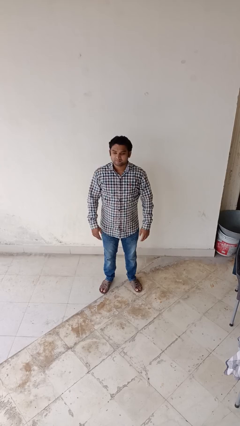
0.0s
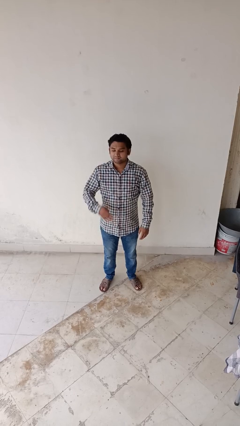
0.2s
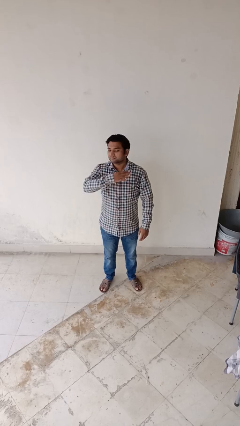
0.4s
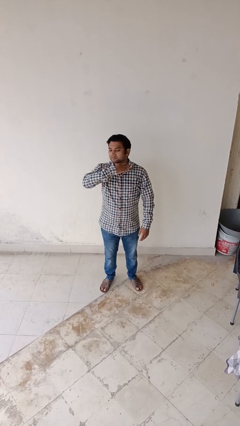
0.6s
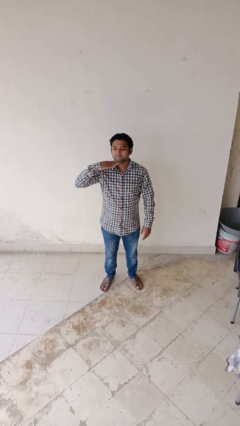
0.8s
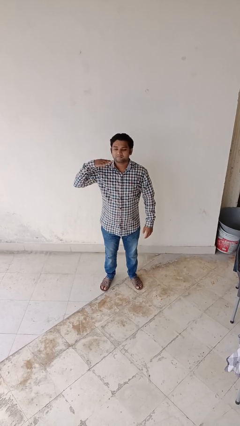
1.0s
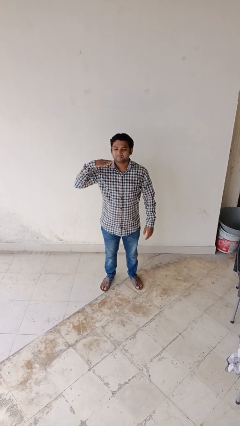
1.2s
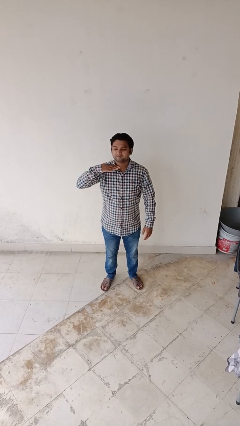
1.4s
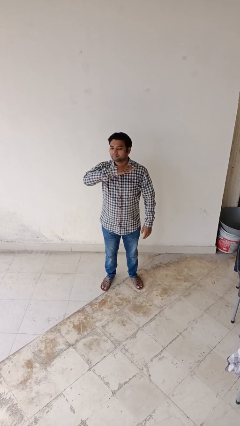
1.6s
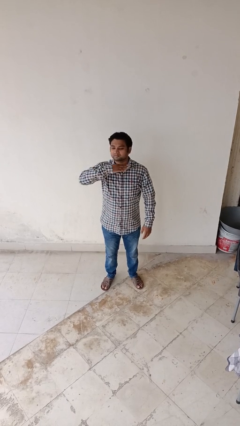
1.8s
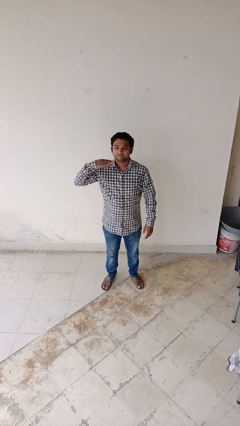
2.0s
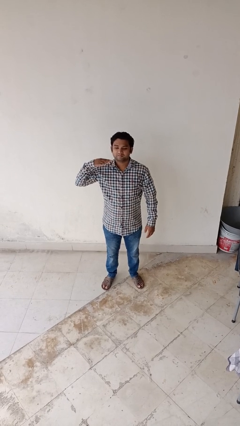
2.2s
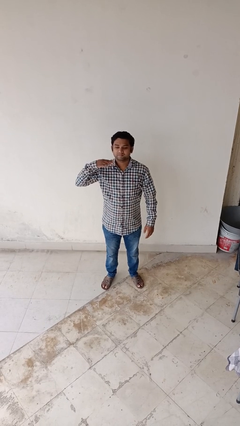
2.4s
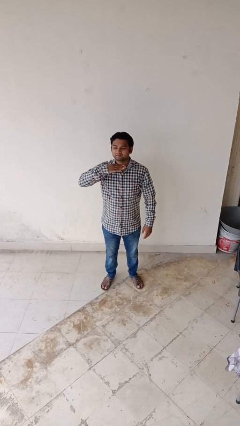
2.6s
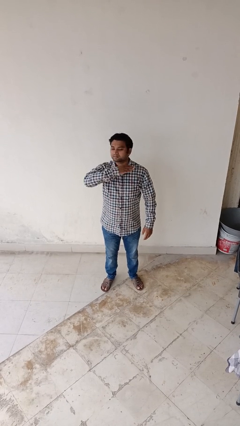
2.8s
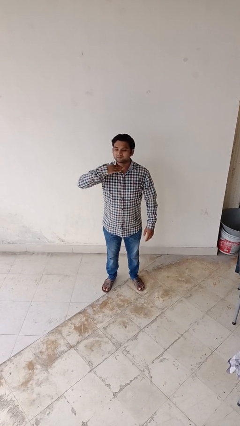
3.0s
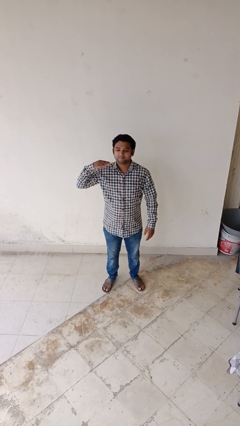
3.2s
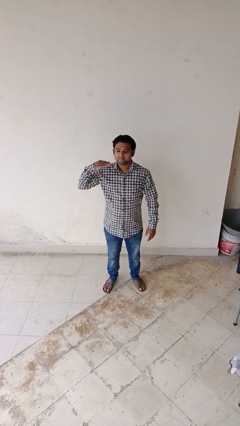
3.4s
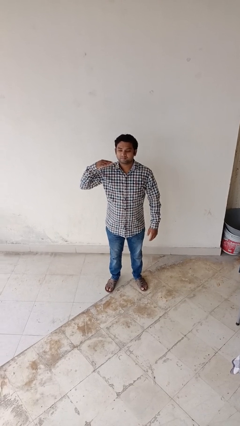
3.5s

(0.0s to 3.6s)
person gestures cut

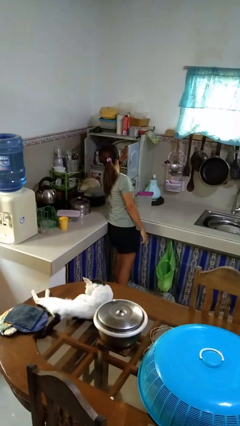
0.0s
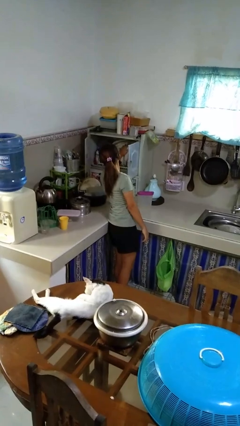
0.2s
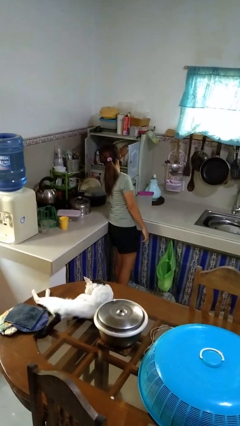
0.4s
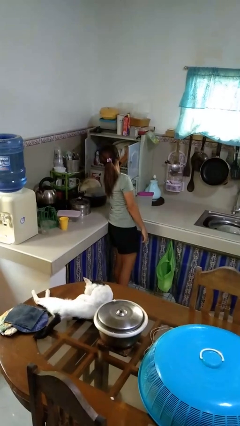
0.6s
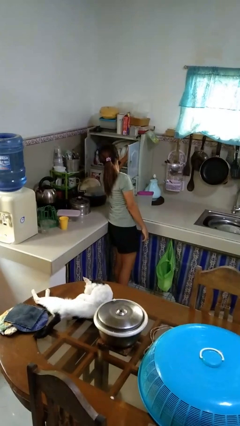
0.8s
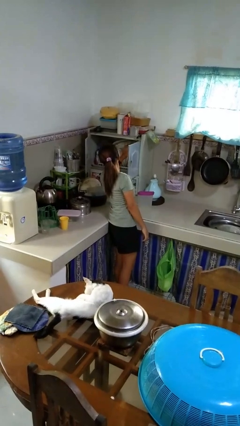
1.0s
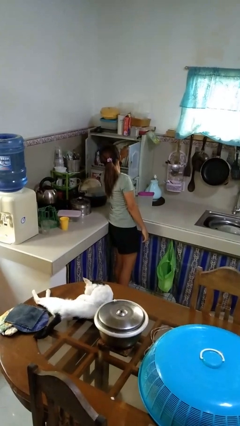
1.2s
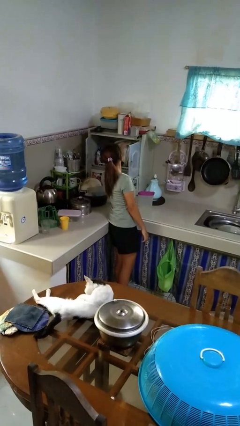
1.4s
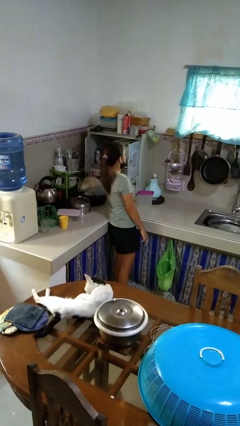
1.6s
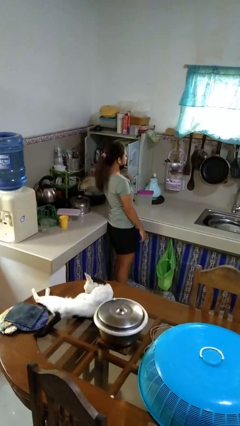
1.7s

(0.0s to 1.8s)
person searches in kitchen drawer

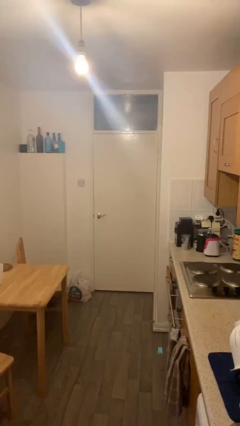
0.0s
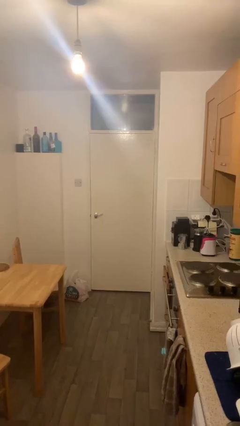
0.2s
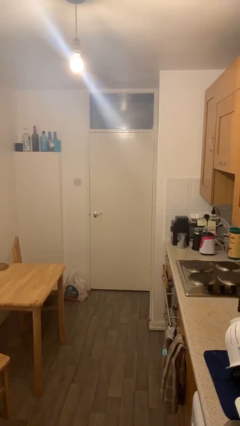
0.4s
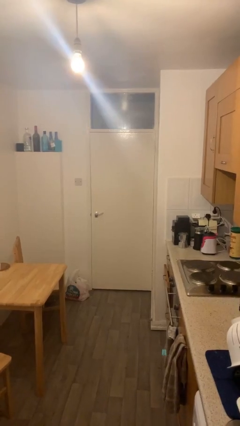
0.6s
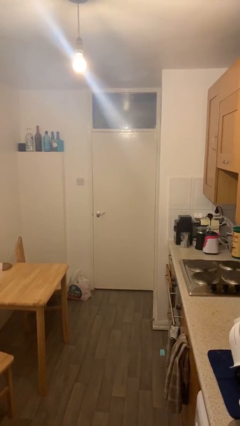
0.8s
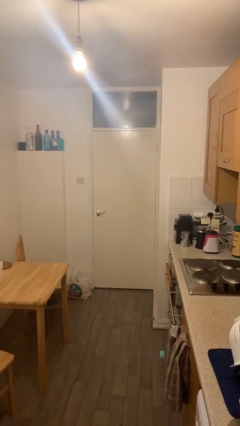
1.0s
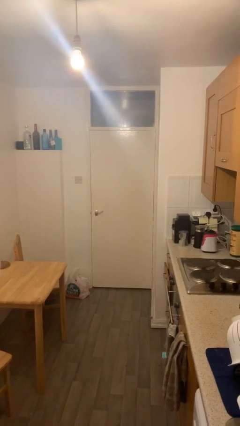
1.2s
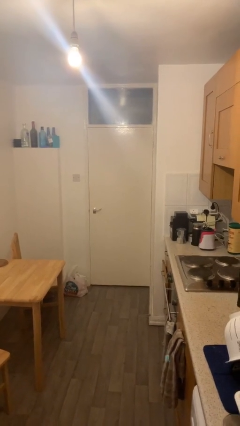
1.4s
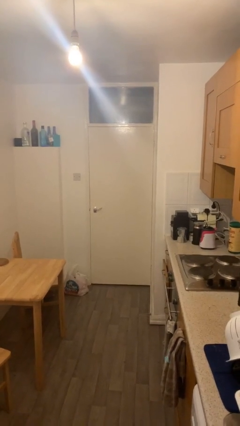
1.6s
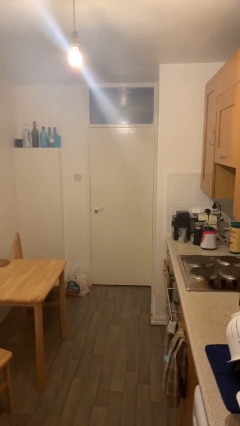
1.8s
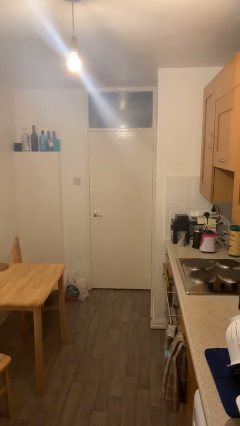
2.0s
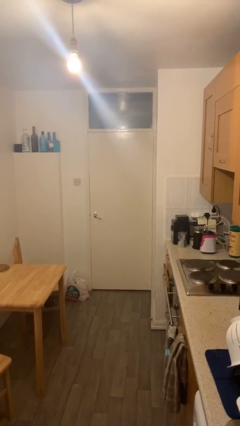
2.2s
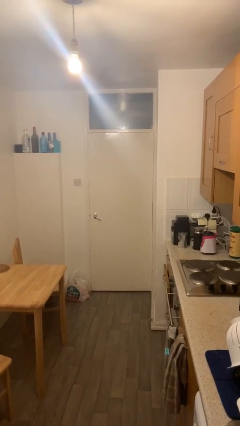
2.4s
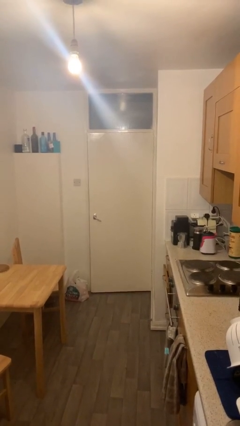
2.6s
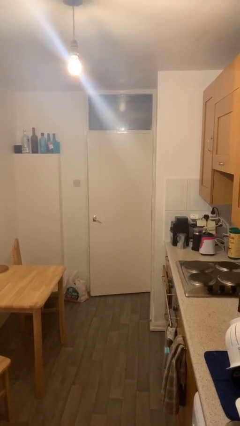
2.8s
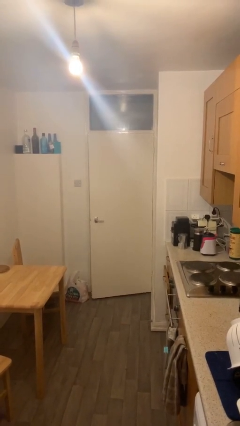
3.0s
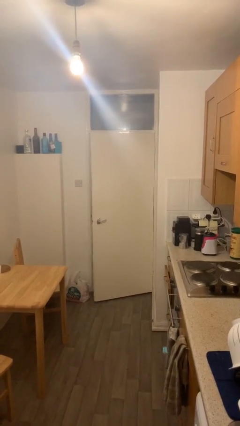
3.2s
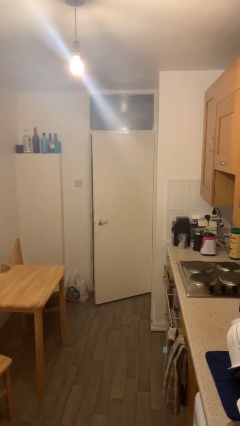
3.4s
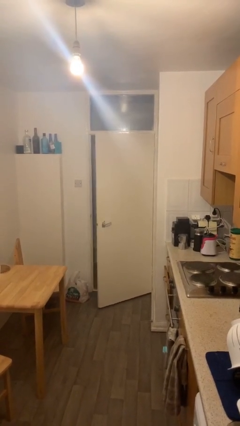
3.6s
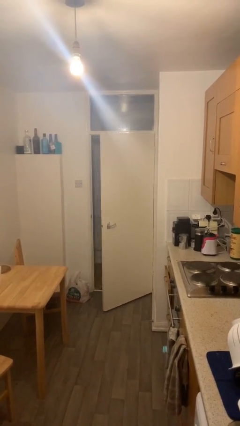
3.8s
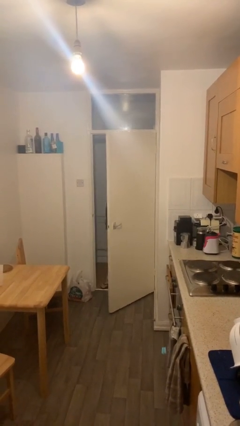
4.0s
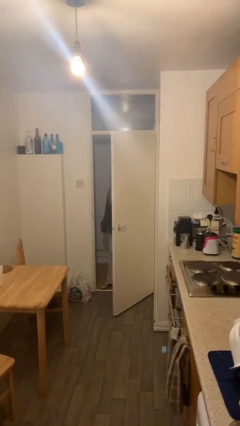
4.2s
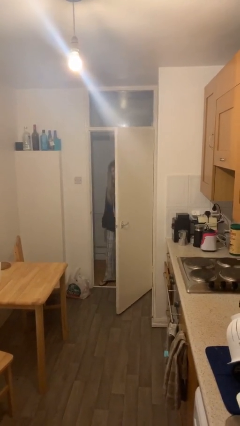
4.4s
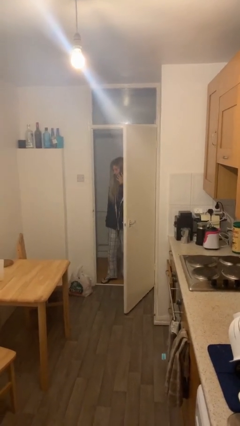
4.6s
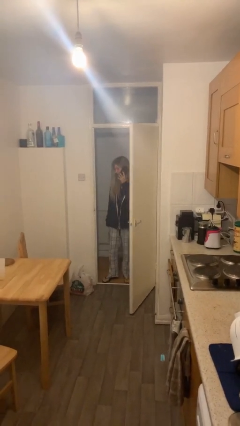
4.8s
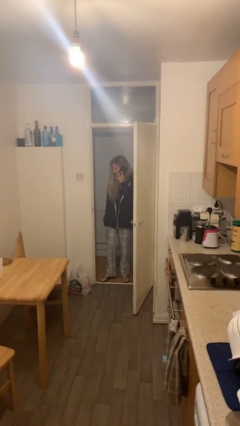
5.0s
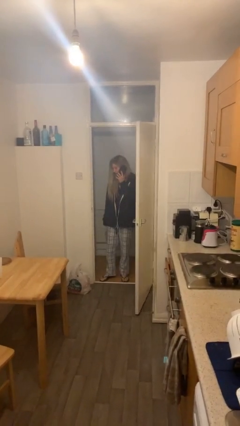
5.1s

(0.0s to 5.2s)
person opens facility door

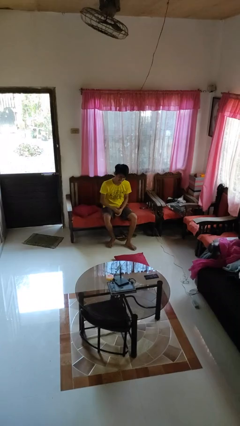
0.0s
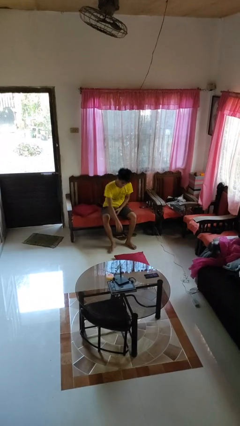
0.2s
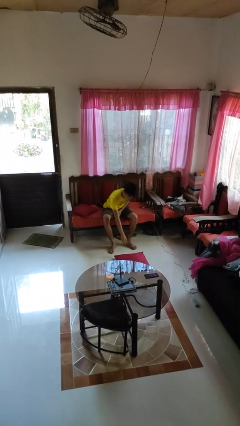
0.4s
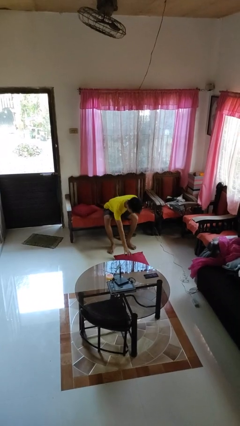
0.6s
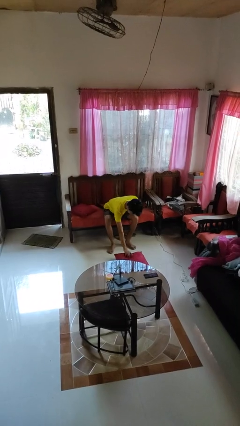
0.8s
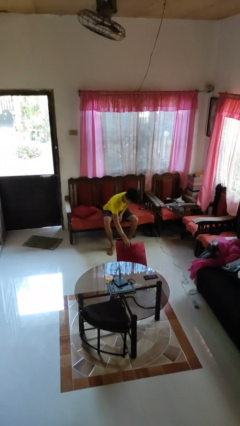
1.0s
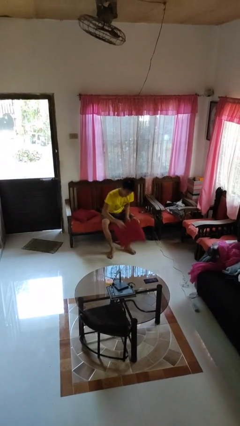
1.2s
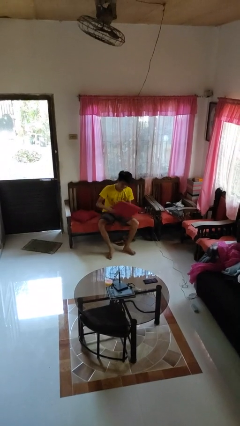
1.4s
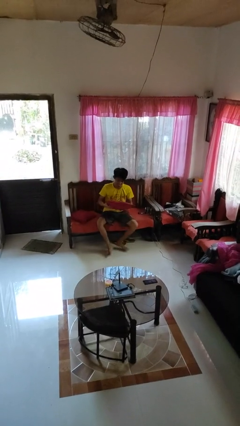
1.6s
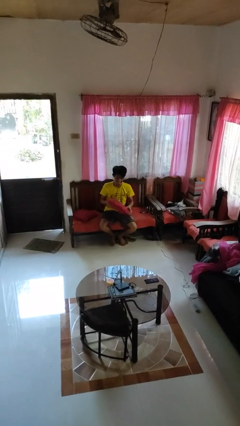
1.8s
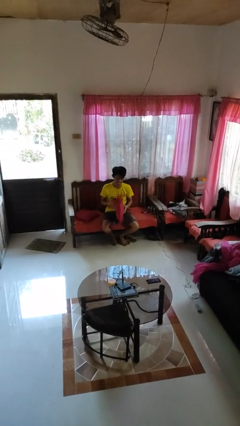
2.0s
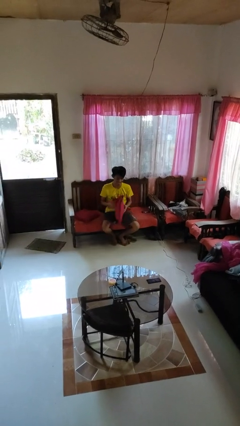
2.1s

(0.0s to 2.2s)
person picks up object from floor

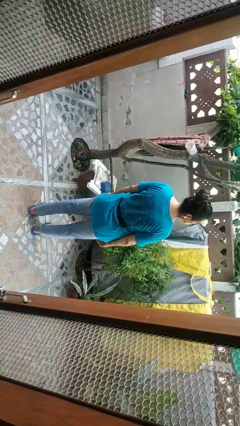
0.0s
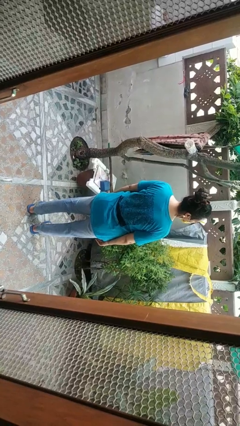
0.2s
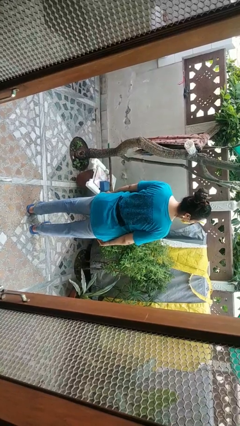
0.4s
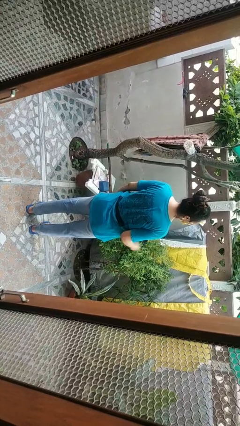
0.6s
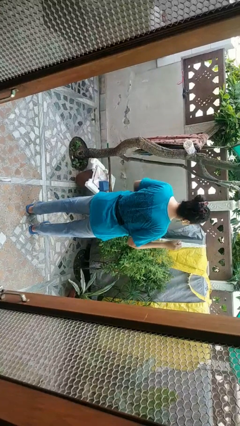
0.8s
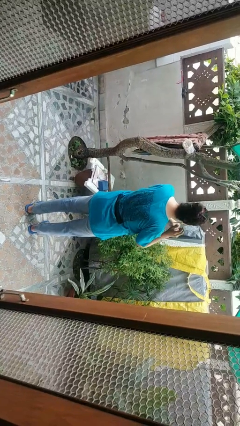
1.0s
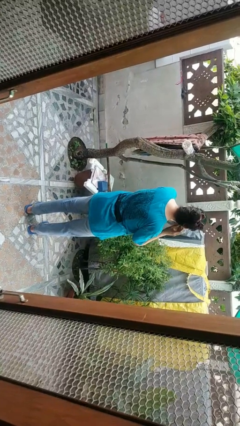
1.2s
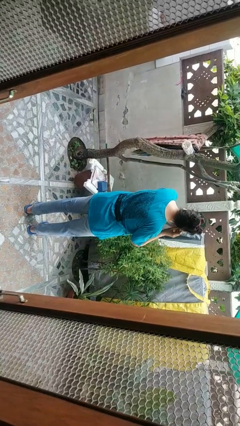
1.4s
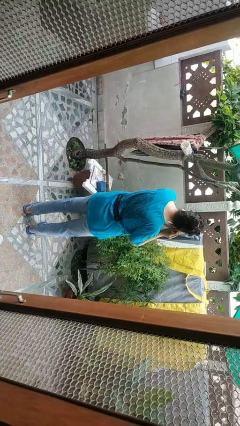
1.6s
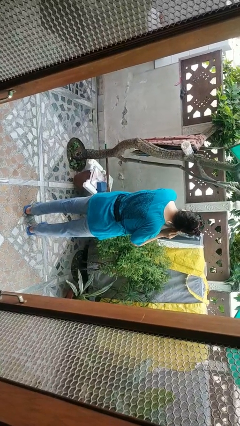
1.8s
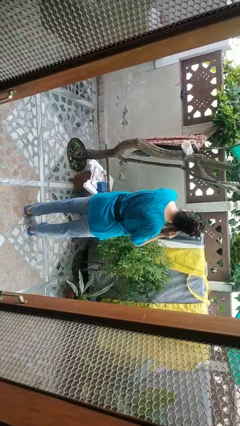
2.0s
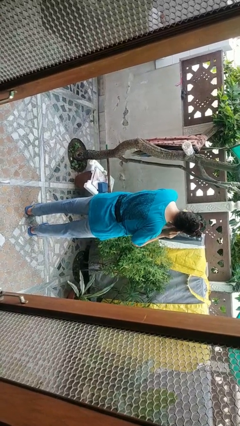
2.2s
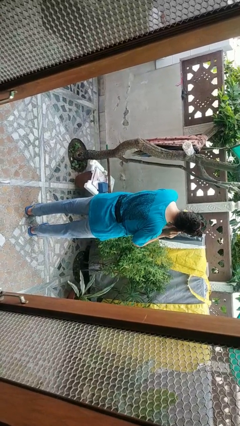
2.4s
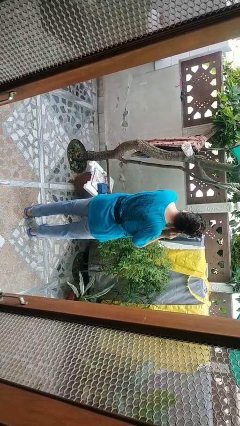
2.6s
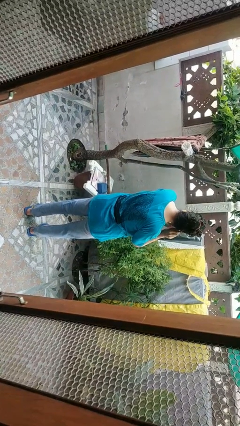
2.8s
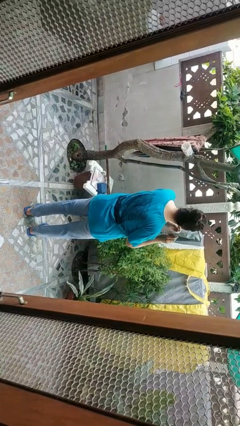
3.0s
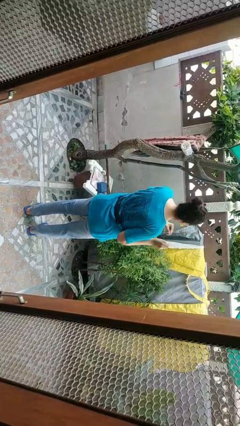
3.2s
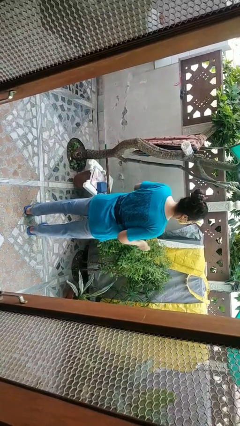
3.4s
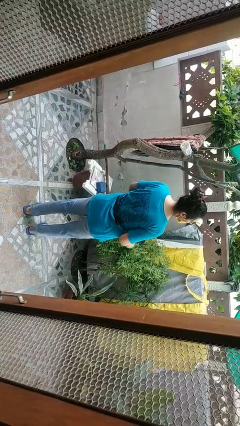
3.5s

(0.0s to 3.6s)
person takes off earrings

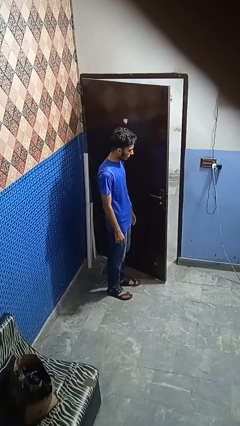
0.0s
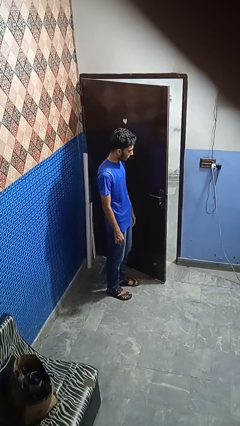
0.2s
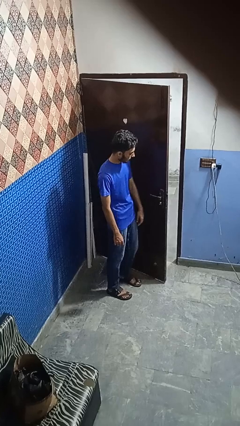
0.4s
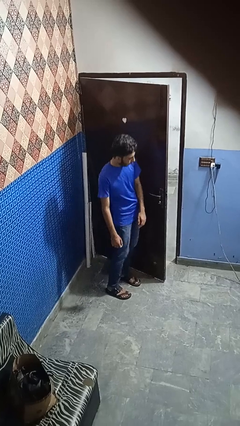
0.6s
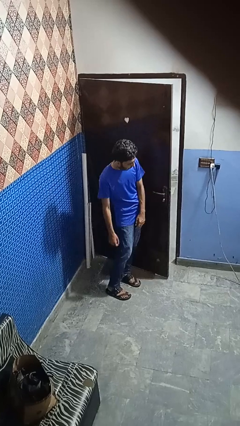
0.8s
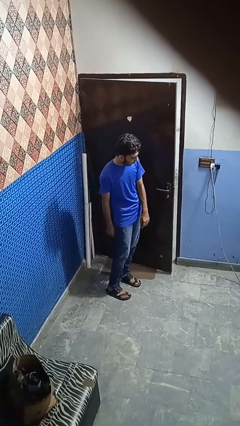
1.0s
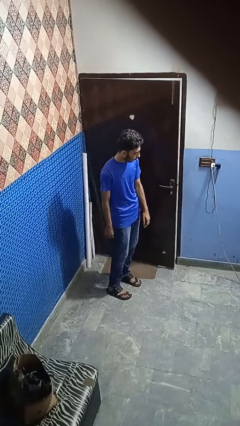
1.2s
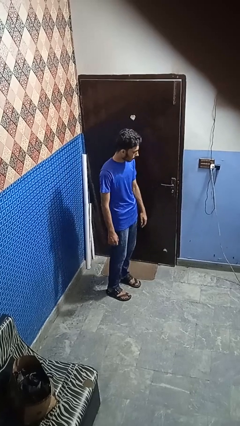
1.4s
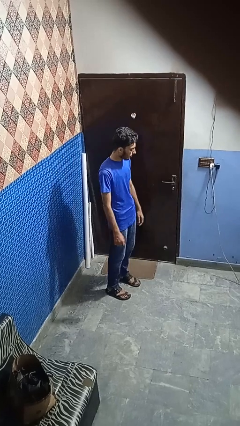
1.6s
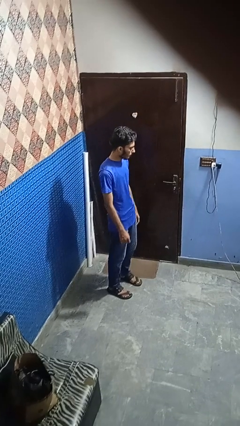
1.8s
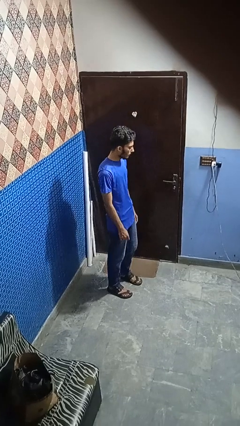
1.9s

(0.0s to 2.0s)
person closes door with hip
